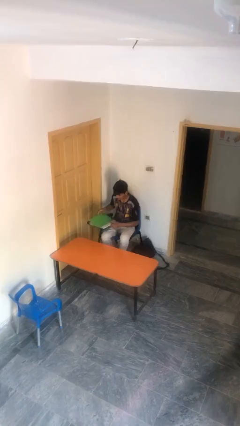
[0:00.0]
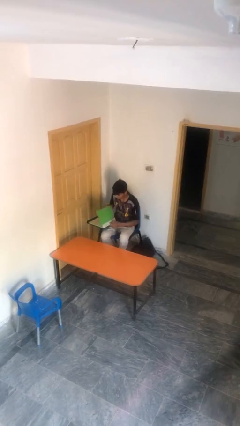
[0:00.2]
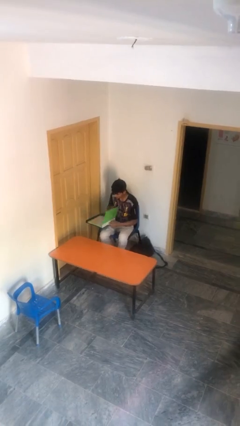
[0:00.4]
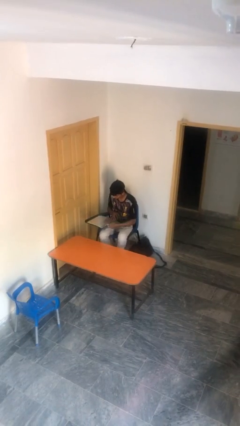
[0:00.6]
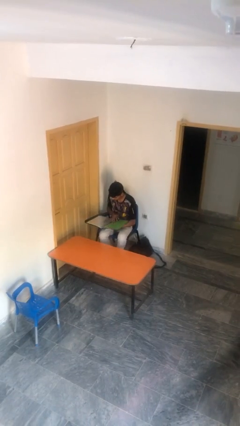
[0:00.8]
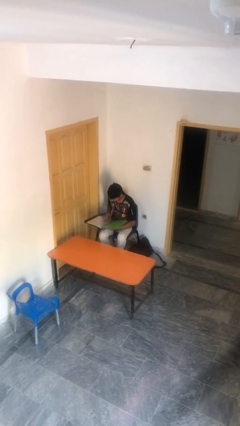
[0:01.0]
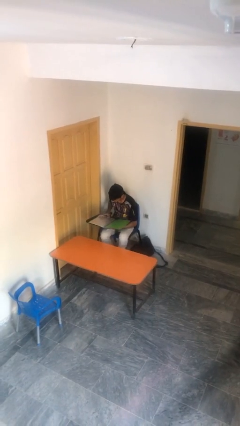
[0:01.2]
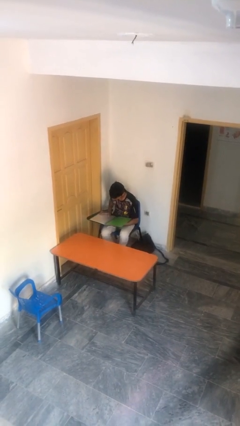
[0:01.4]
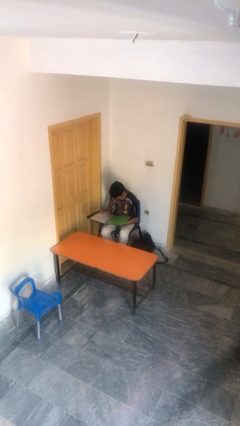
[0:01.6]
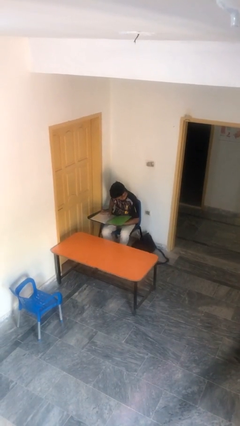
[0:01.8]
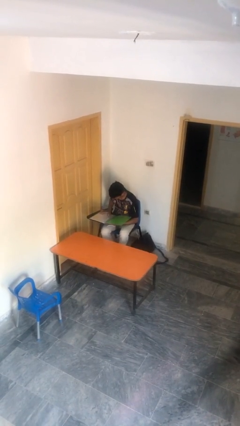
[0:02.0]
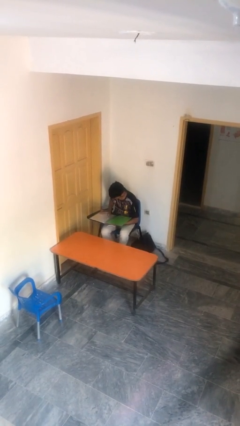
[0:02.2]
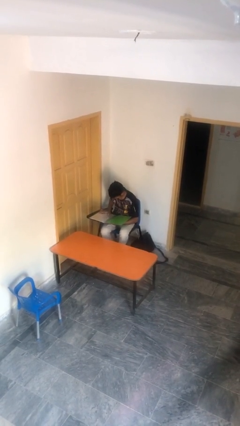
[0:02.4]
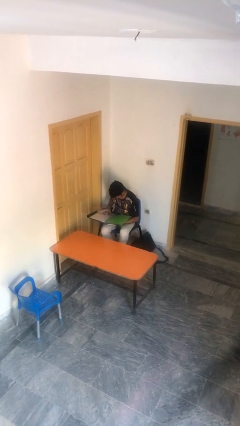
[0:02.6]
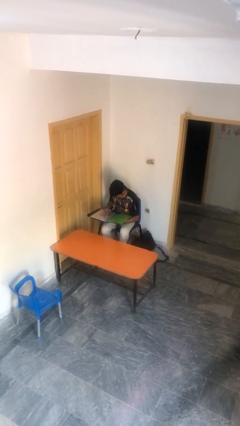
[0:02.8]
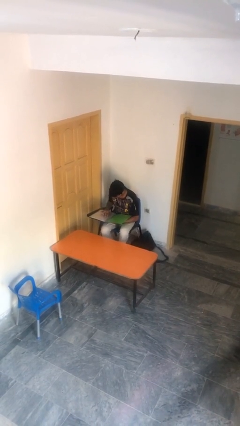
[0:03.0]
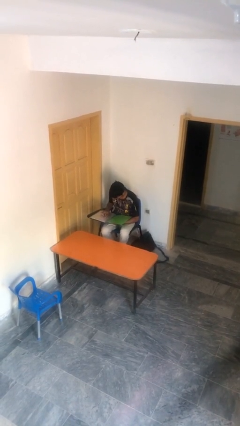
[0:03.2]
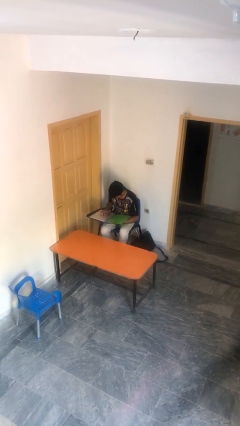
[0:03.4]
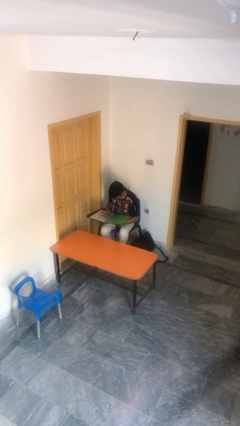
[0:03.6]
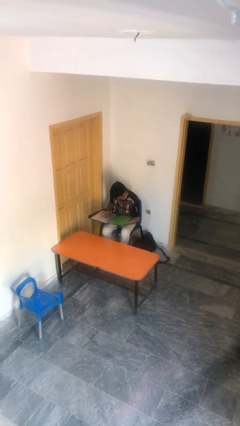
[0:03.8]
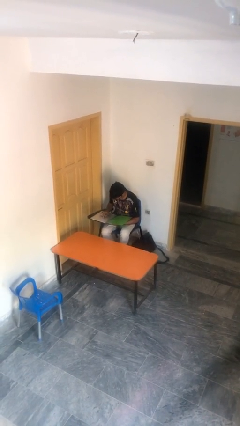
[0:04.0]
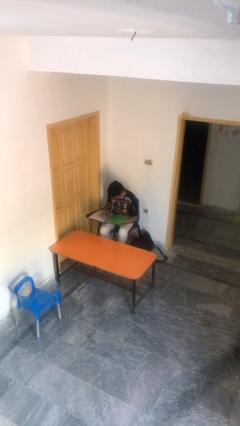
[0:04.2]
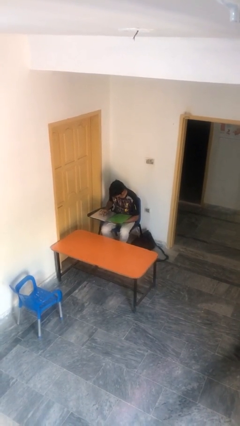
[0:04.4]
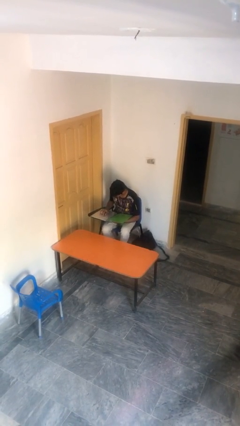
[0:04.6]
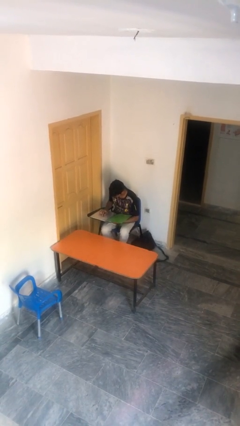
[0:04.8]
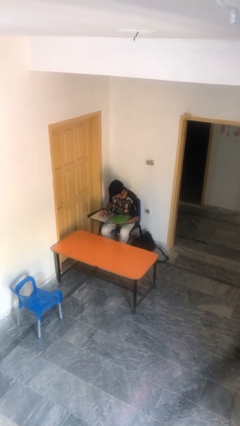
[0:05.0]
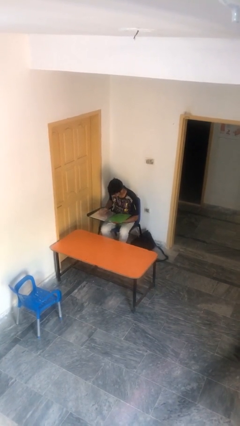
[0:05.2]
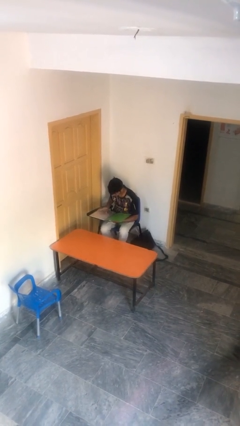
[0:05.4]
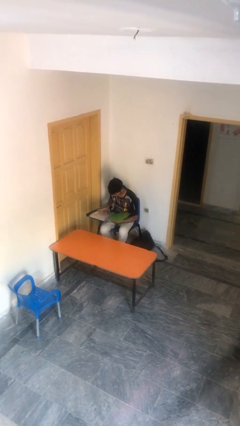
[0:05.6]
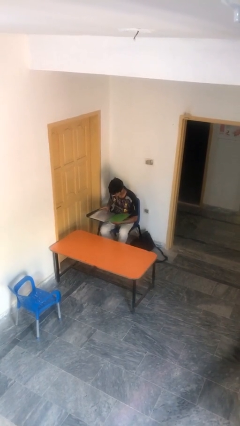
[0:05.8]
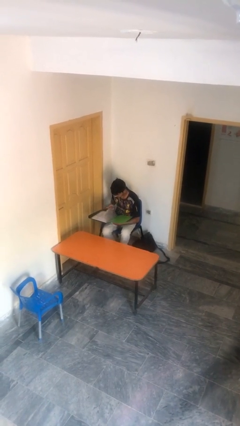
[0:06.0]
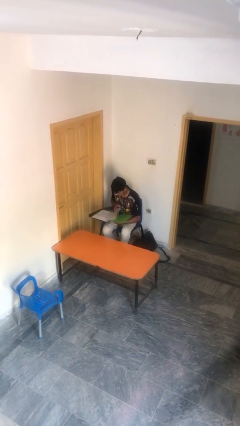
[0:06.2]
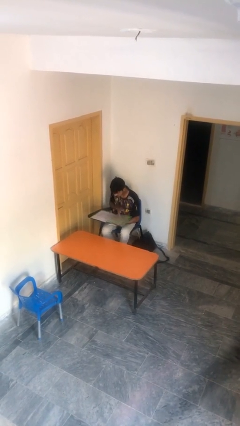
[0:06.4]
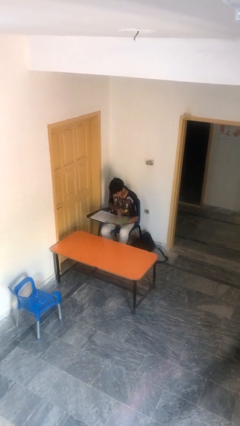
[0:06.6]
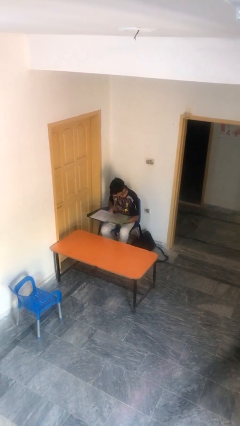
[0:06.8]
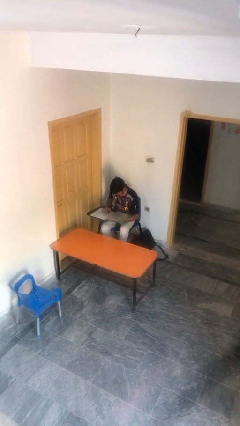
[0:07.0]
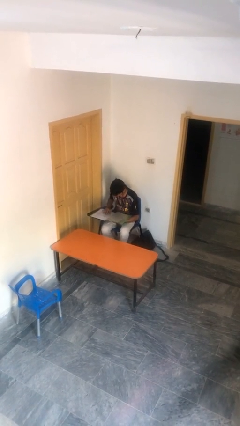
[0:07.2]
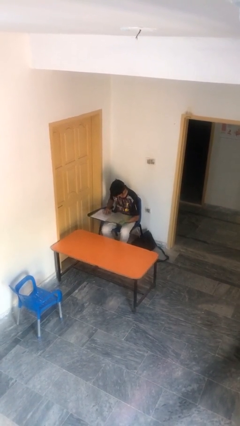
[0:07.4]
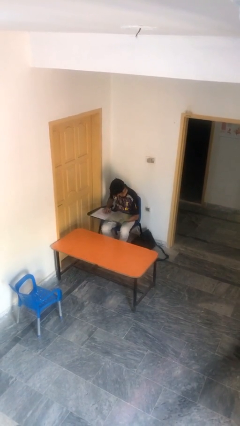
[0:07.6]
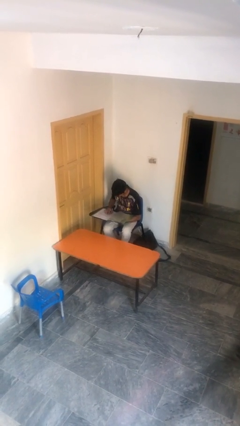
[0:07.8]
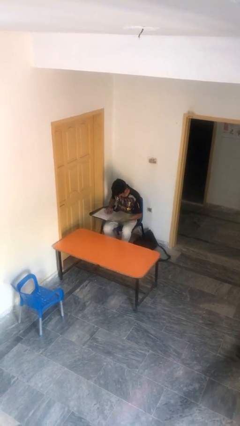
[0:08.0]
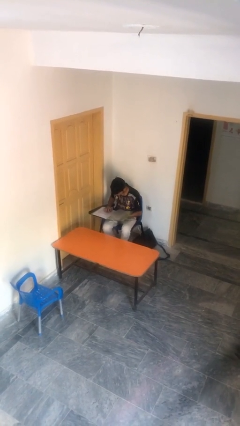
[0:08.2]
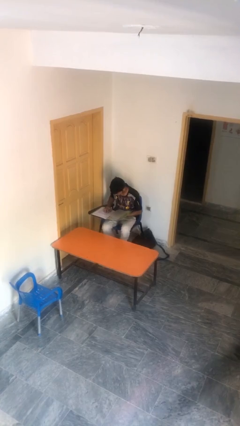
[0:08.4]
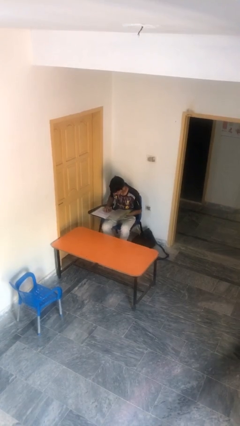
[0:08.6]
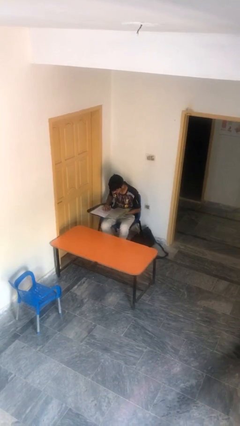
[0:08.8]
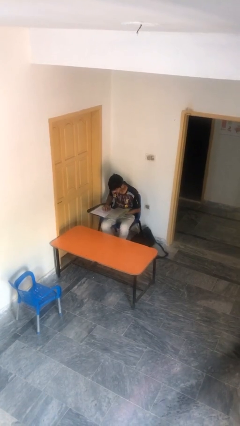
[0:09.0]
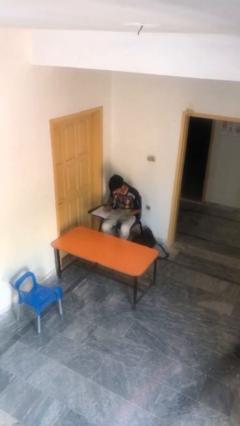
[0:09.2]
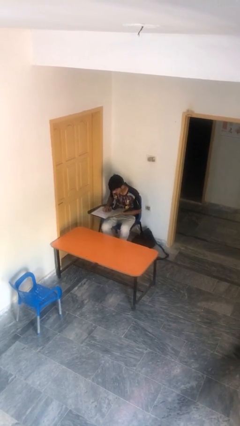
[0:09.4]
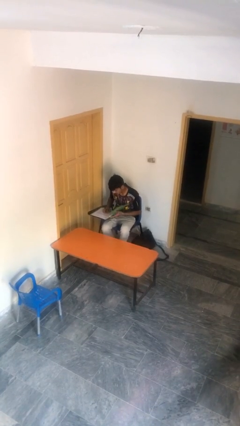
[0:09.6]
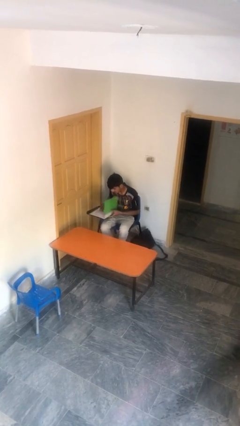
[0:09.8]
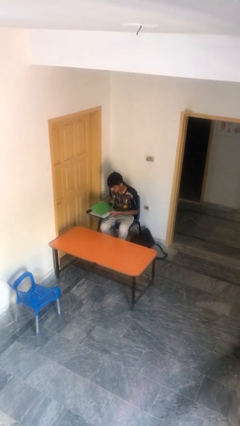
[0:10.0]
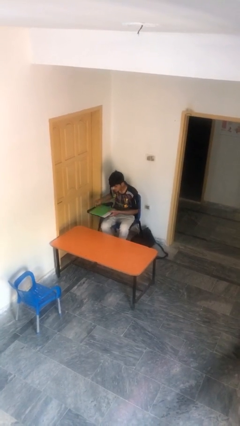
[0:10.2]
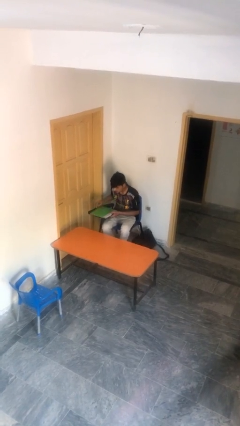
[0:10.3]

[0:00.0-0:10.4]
person reads document

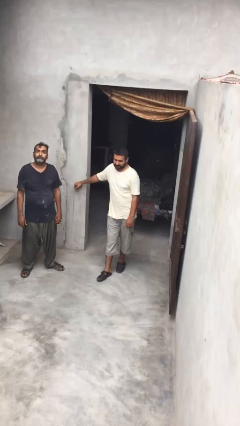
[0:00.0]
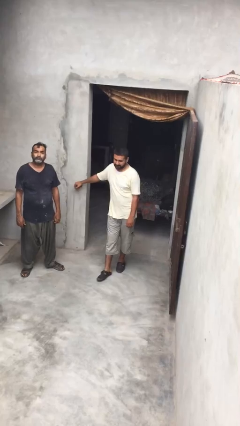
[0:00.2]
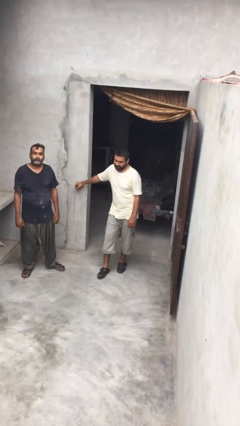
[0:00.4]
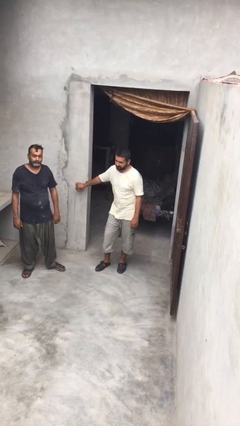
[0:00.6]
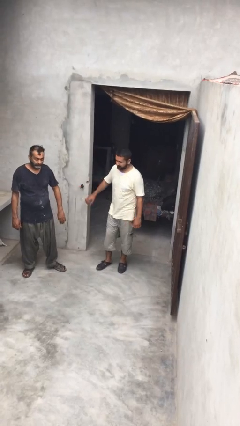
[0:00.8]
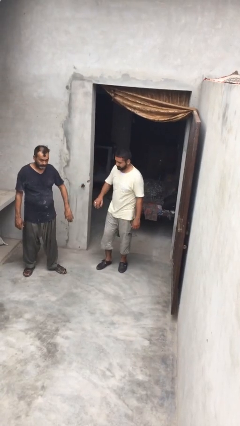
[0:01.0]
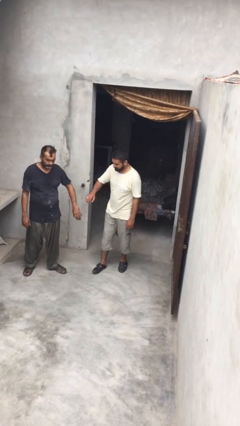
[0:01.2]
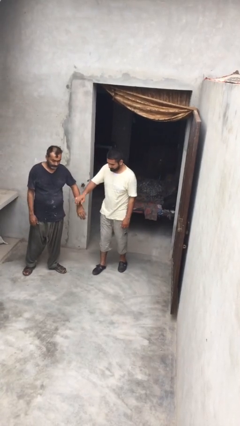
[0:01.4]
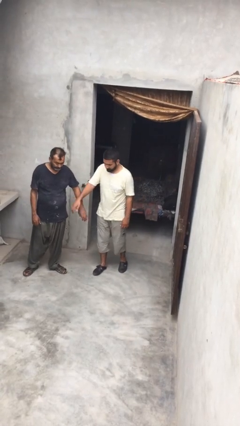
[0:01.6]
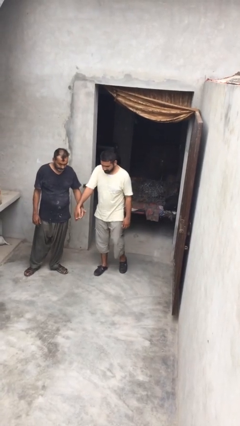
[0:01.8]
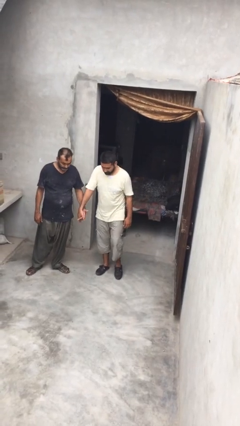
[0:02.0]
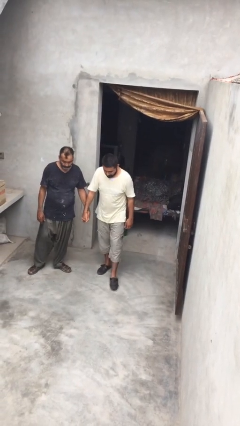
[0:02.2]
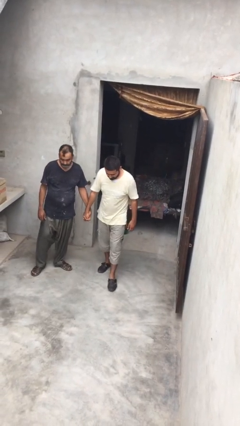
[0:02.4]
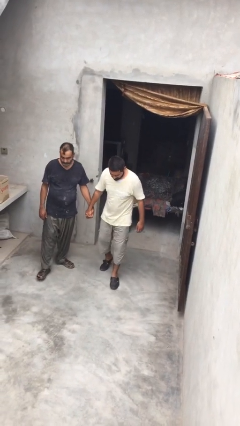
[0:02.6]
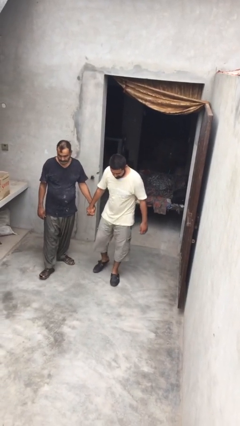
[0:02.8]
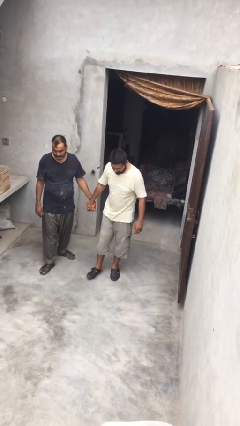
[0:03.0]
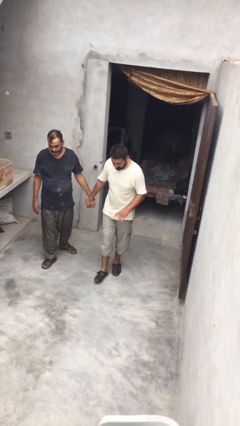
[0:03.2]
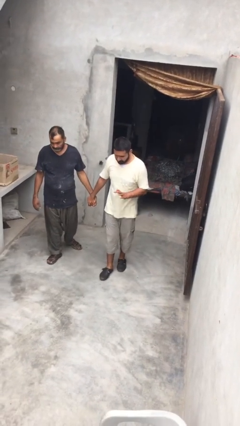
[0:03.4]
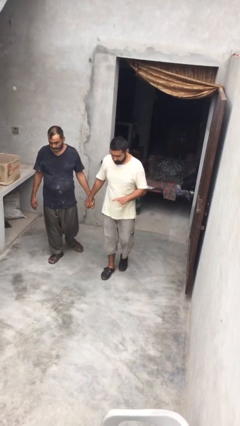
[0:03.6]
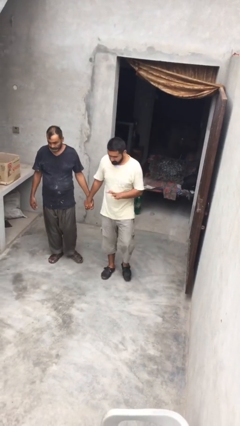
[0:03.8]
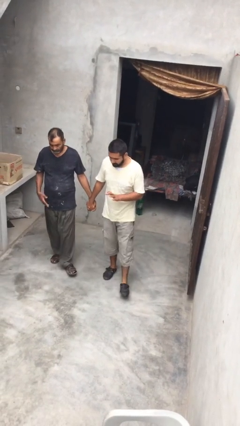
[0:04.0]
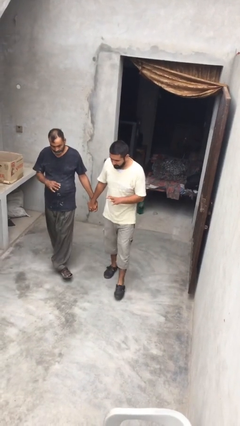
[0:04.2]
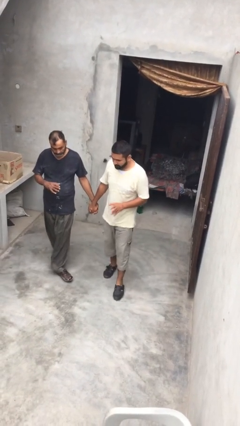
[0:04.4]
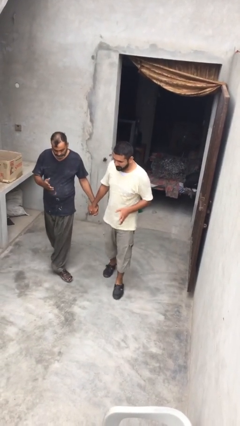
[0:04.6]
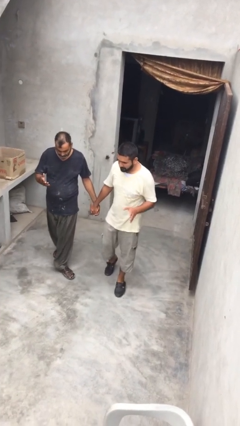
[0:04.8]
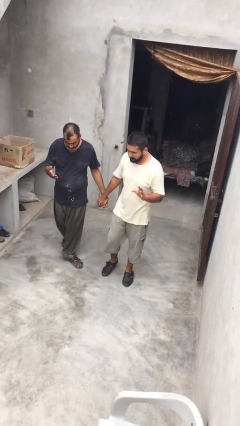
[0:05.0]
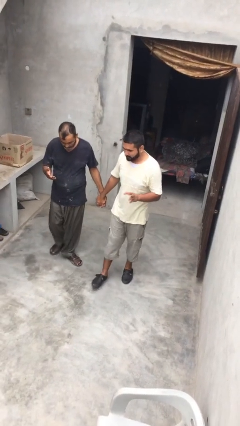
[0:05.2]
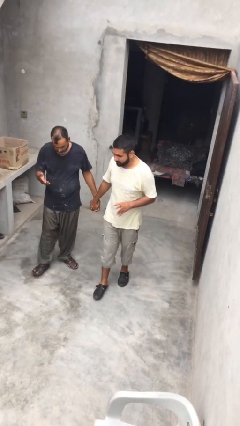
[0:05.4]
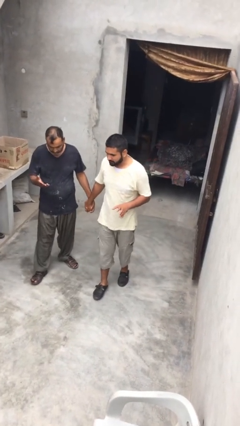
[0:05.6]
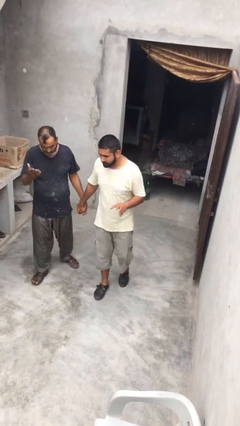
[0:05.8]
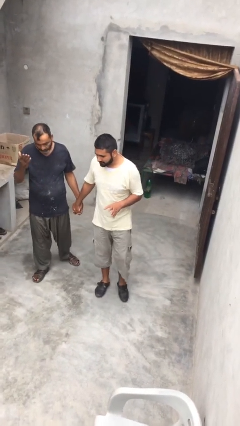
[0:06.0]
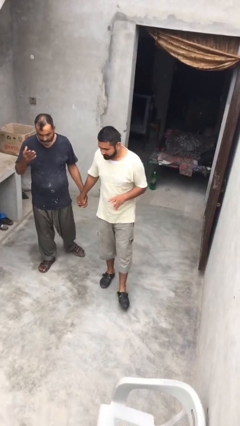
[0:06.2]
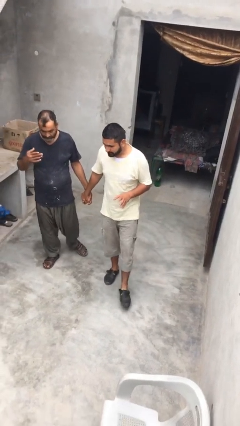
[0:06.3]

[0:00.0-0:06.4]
person holds hand

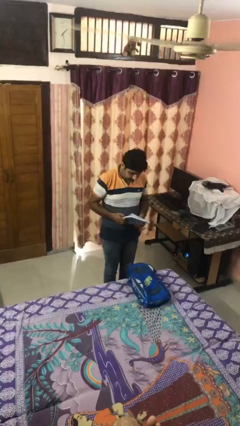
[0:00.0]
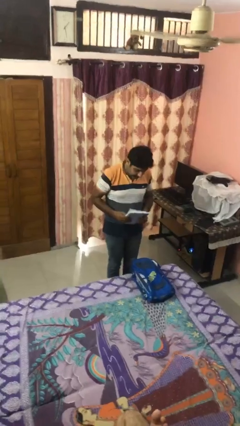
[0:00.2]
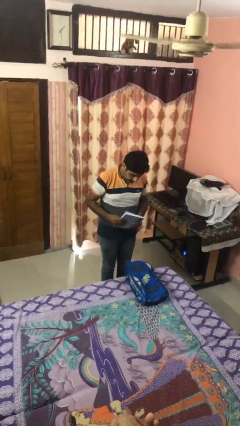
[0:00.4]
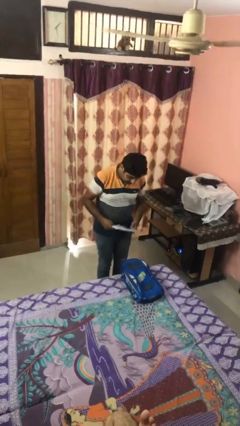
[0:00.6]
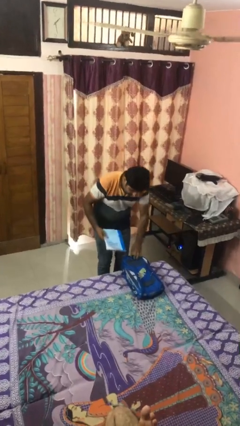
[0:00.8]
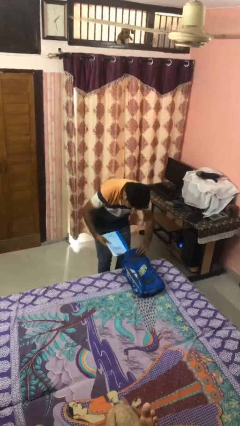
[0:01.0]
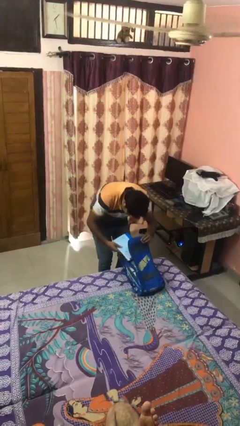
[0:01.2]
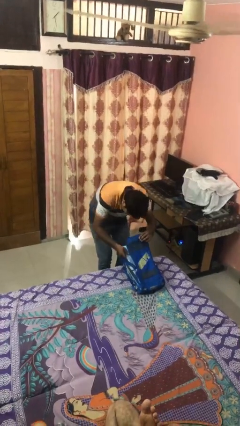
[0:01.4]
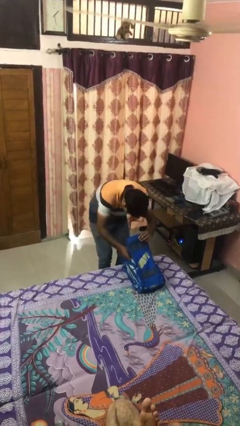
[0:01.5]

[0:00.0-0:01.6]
person puts object into backpack
